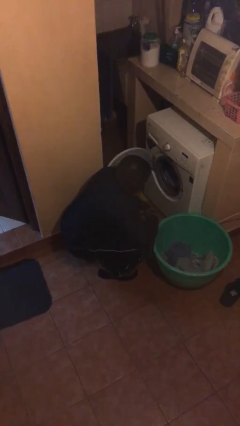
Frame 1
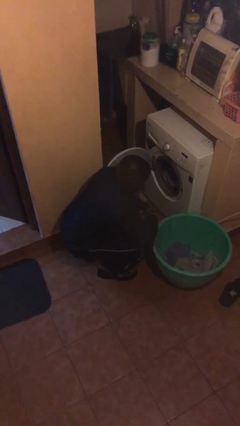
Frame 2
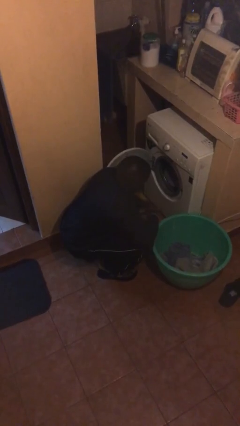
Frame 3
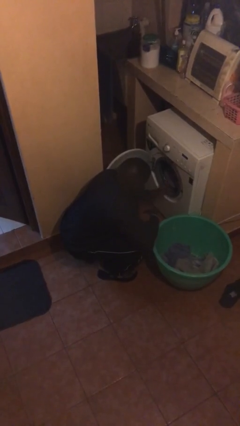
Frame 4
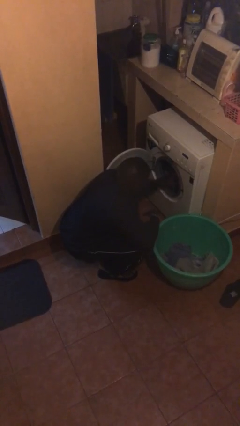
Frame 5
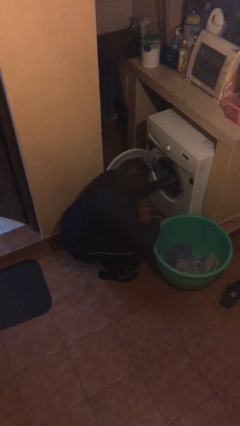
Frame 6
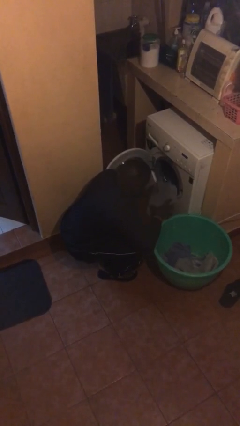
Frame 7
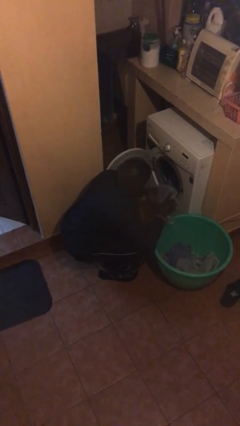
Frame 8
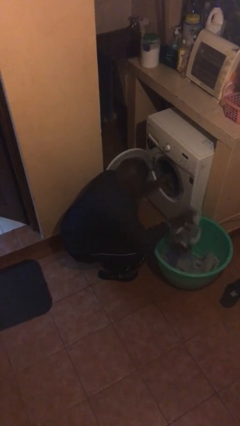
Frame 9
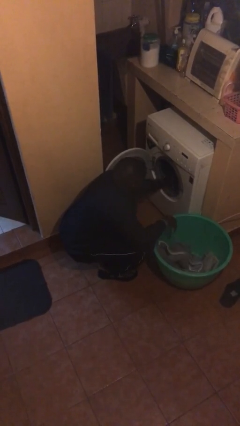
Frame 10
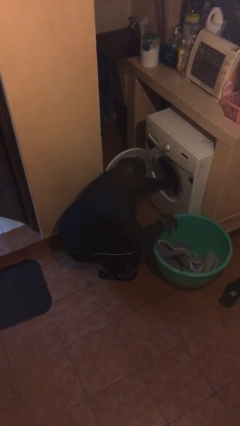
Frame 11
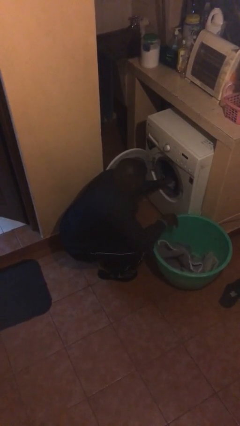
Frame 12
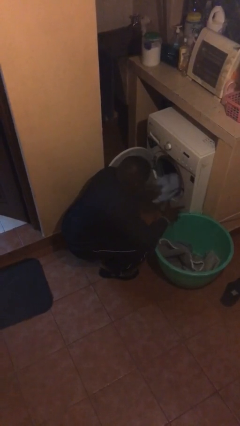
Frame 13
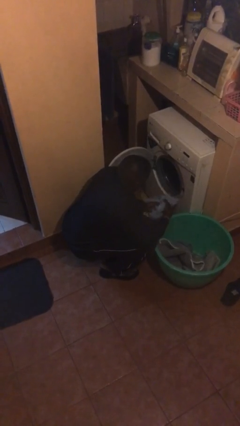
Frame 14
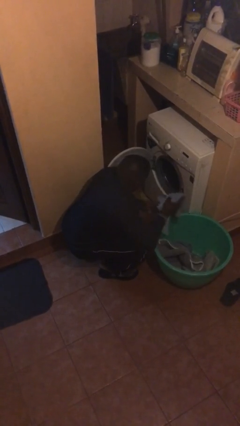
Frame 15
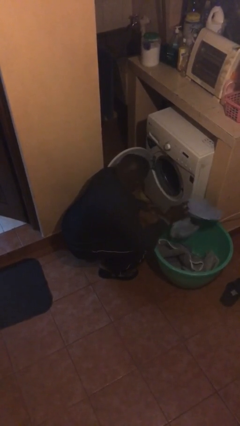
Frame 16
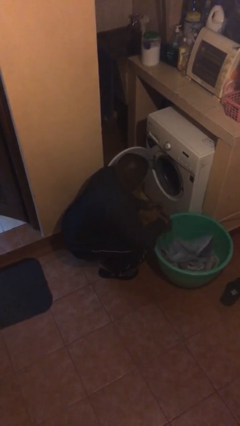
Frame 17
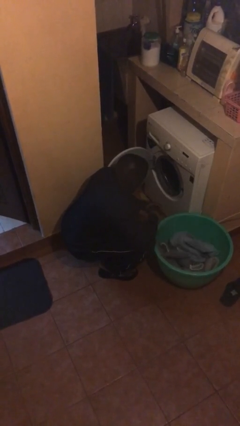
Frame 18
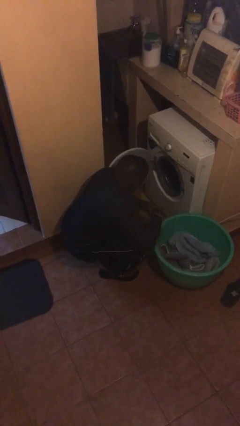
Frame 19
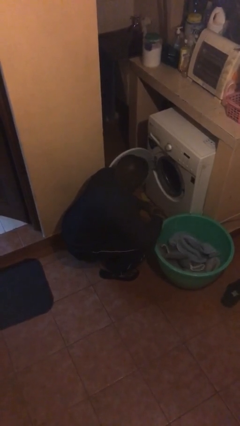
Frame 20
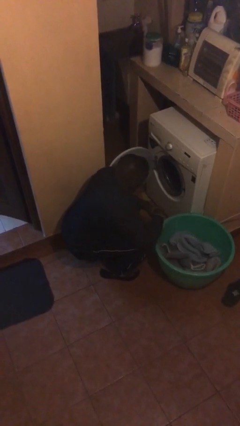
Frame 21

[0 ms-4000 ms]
person loads clotheswasher

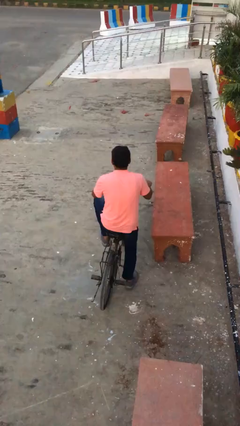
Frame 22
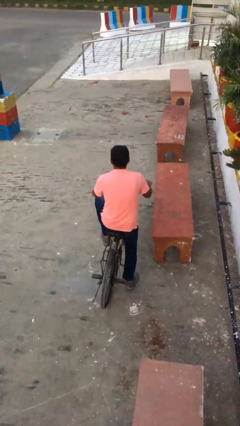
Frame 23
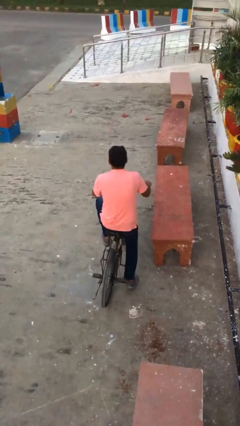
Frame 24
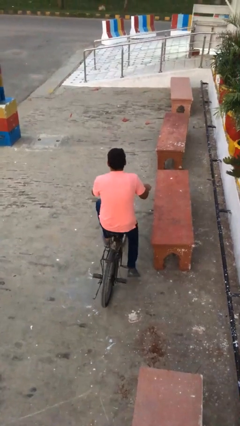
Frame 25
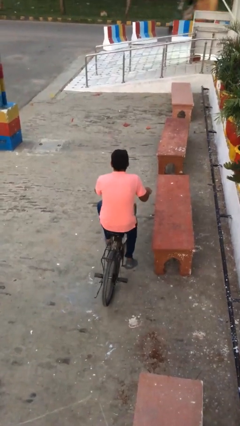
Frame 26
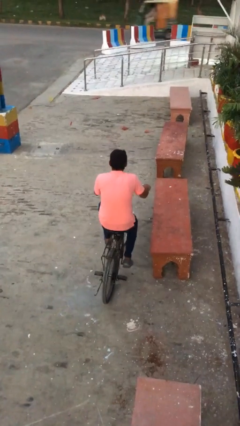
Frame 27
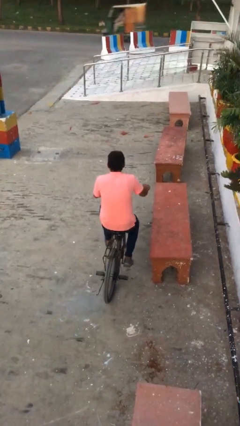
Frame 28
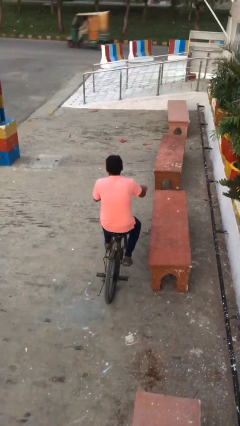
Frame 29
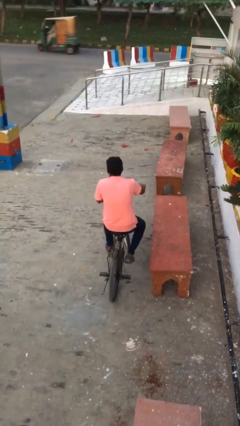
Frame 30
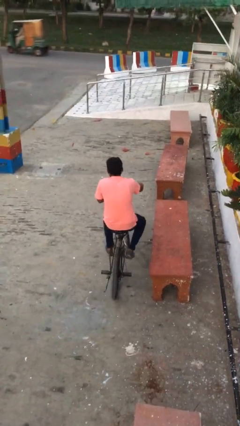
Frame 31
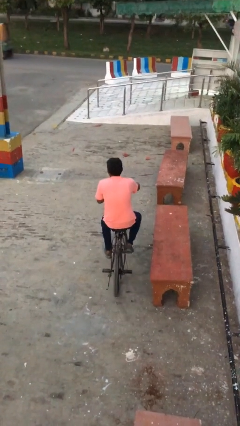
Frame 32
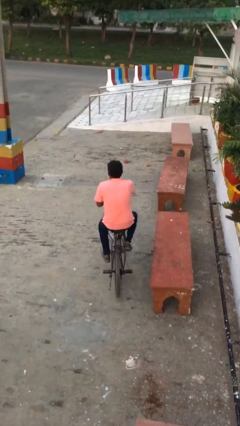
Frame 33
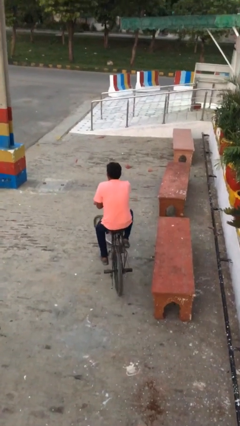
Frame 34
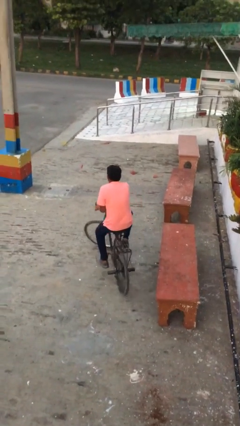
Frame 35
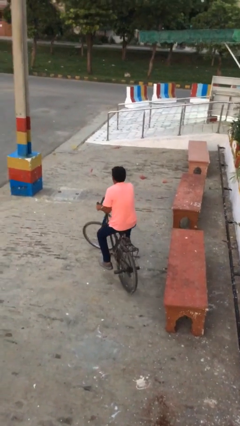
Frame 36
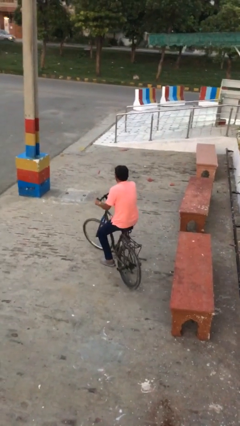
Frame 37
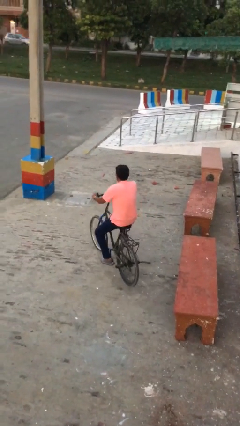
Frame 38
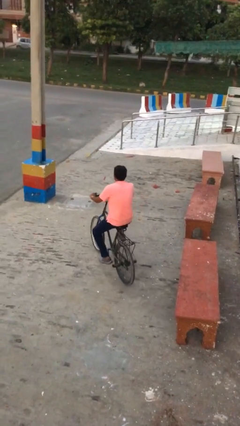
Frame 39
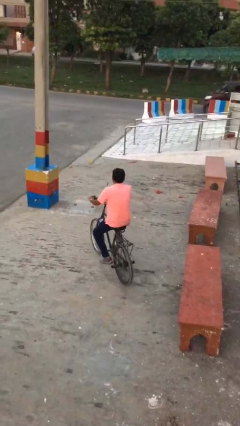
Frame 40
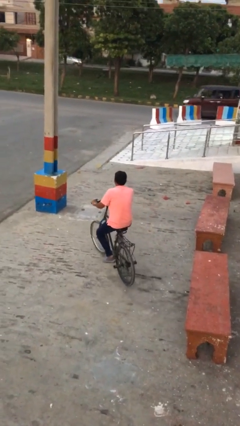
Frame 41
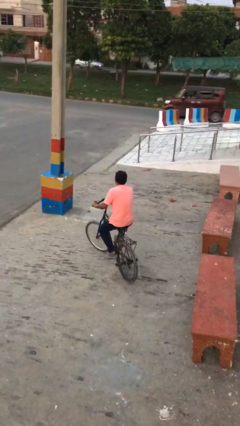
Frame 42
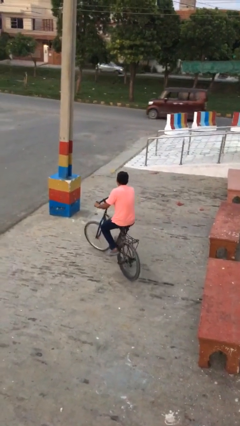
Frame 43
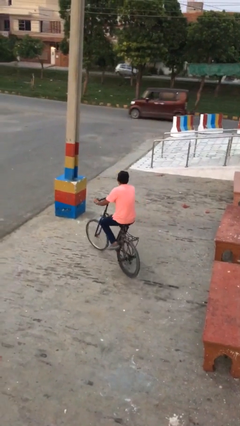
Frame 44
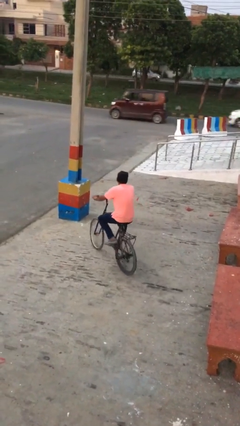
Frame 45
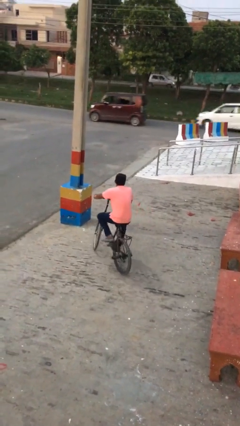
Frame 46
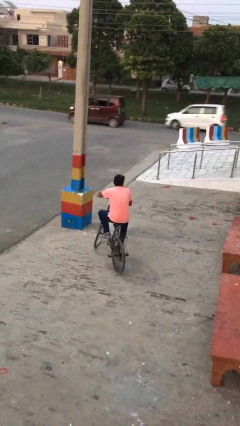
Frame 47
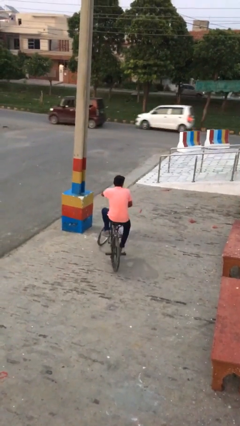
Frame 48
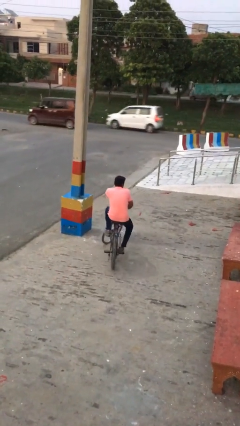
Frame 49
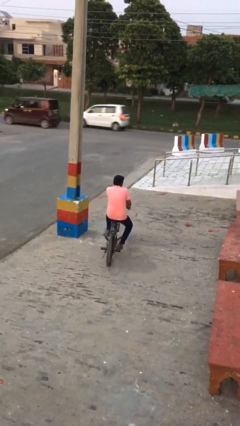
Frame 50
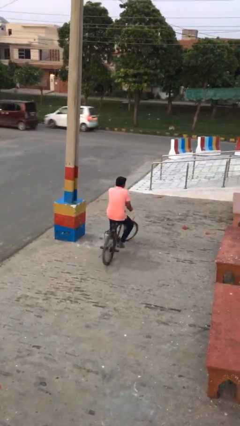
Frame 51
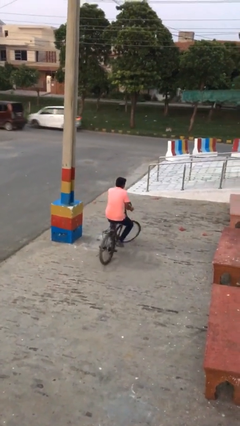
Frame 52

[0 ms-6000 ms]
person rides bicycle

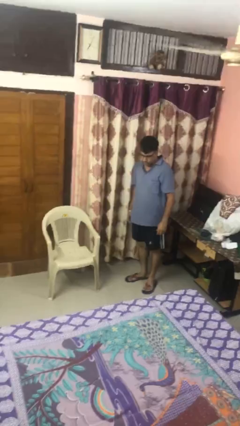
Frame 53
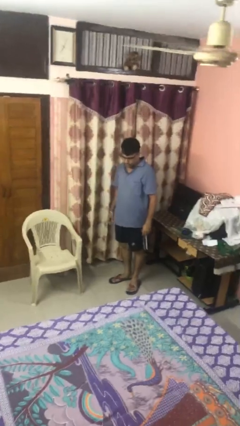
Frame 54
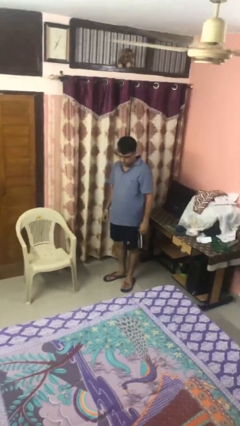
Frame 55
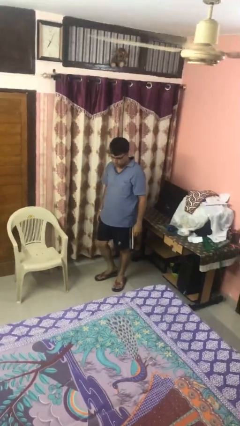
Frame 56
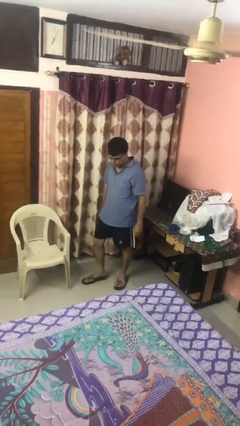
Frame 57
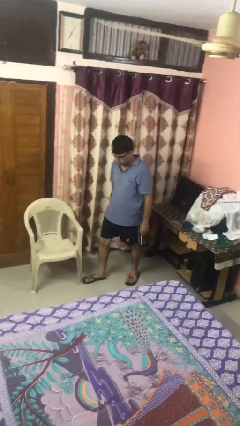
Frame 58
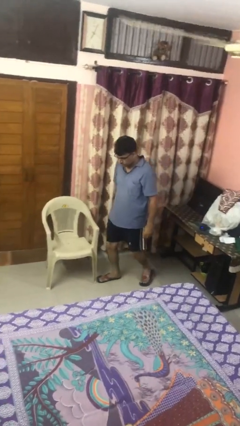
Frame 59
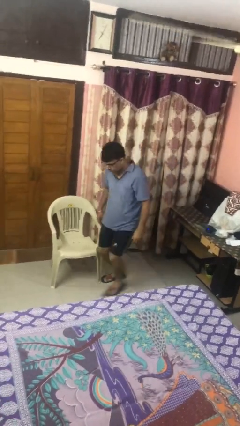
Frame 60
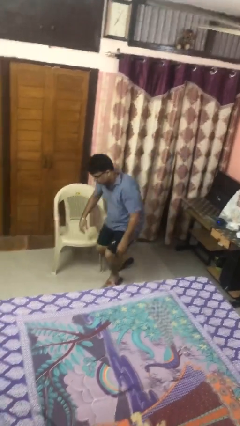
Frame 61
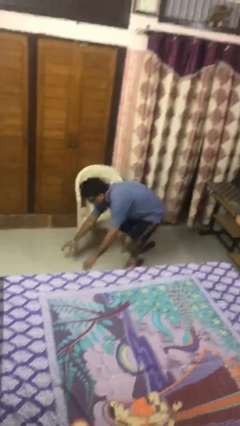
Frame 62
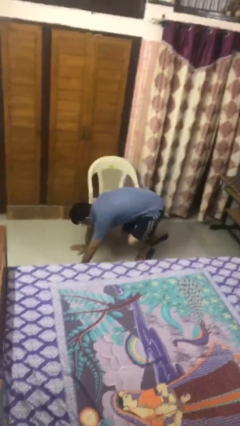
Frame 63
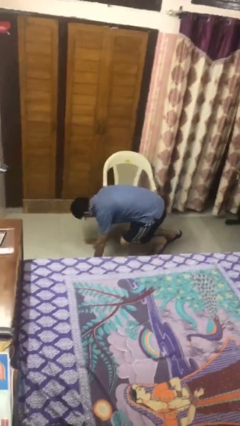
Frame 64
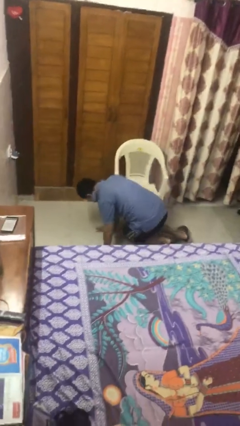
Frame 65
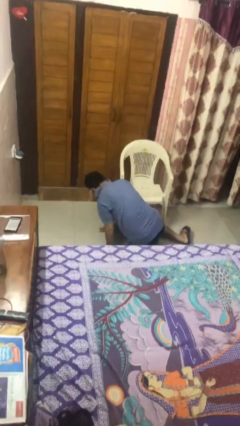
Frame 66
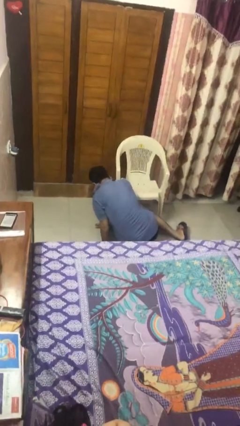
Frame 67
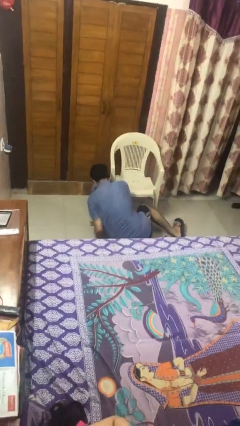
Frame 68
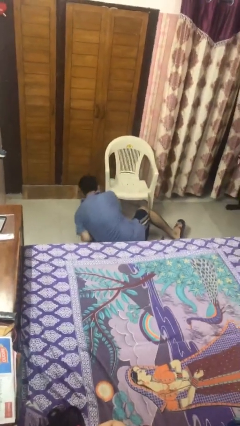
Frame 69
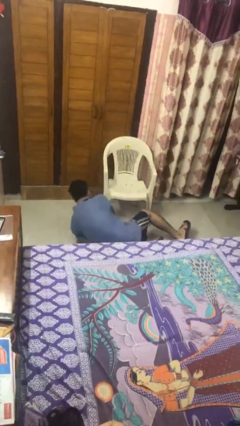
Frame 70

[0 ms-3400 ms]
person trips on object on floor

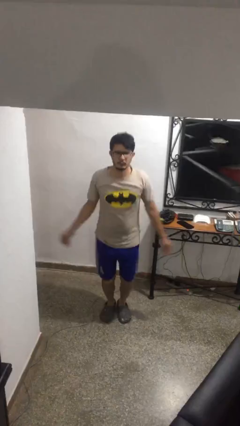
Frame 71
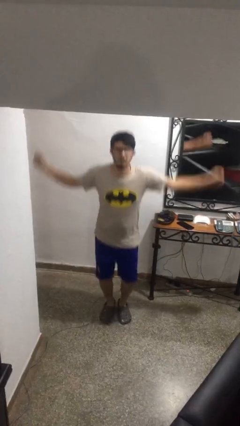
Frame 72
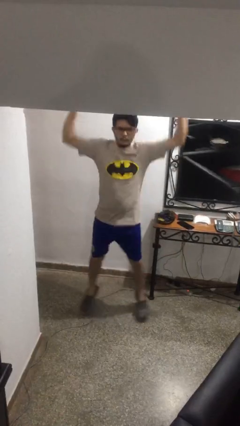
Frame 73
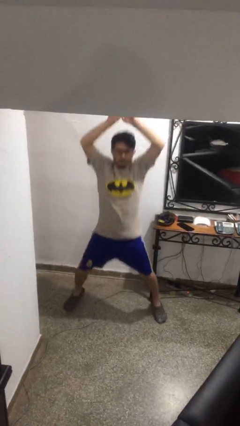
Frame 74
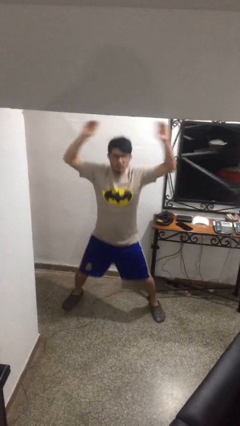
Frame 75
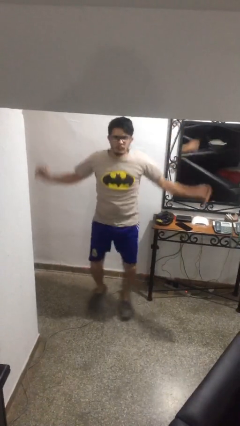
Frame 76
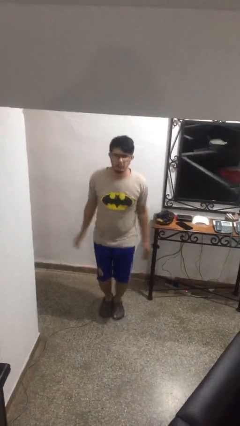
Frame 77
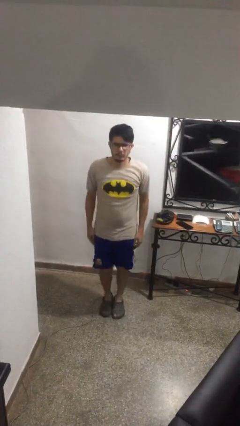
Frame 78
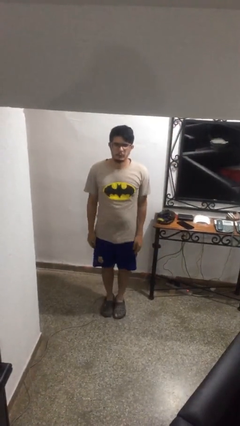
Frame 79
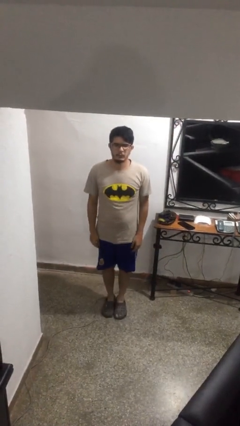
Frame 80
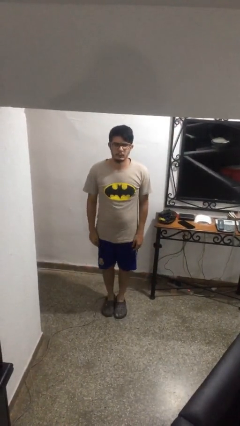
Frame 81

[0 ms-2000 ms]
person exercises with jumping jacks

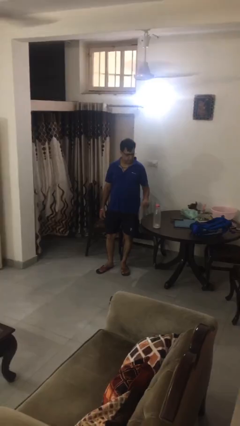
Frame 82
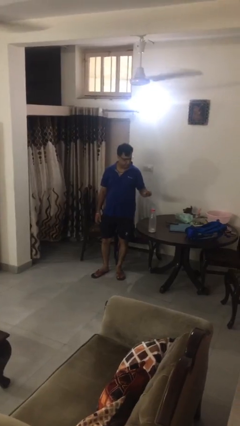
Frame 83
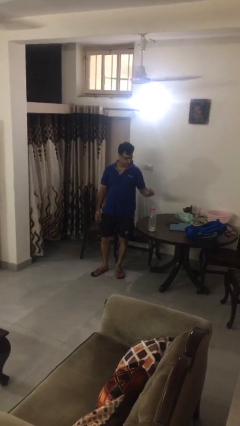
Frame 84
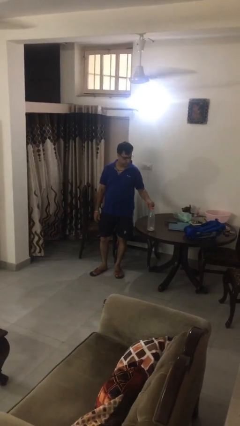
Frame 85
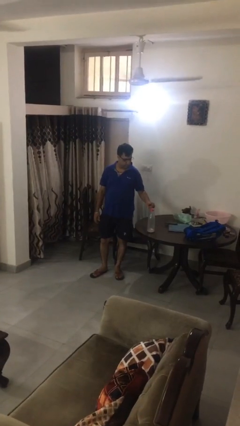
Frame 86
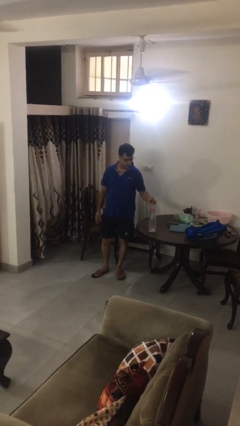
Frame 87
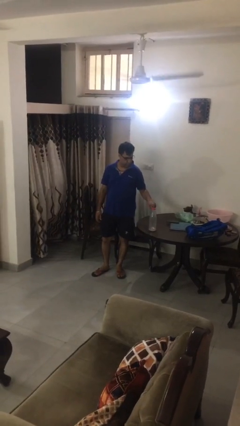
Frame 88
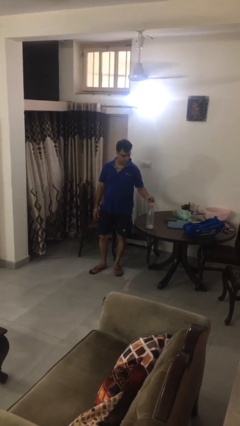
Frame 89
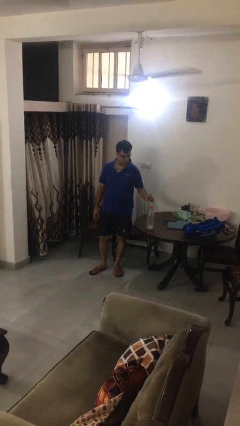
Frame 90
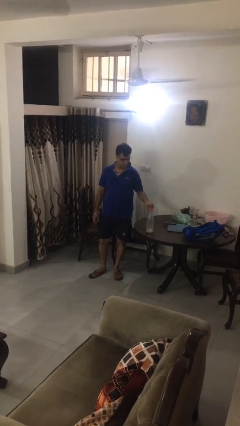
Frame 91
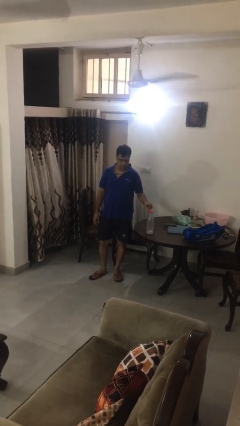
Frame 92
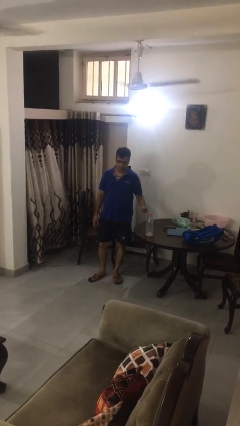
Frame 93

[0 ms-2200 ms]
person taps object with finger

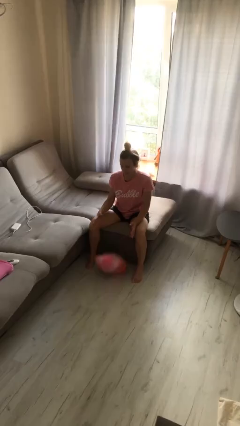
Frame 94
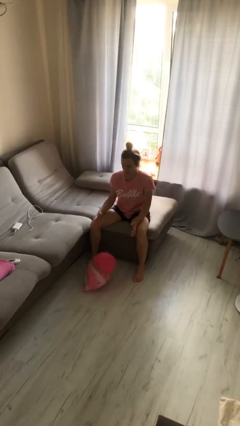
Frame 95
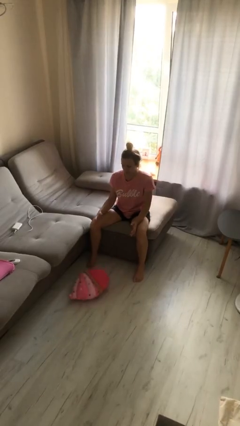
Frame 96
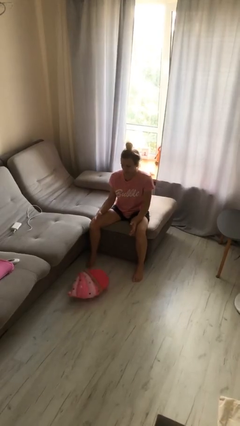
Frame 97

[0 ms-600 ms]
person drops object
